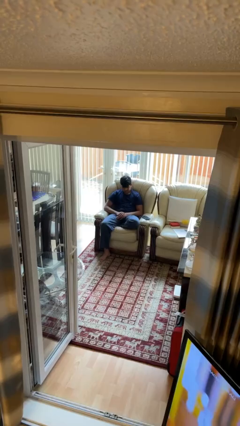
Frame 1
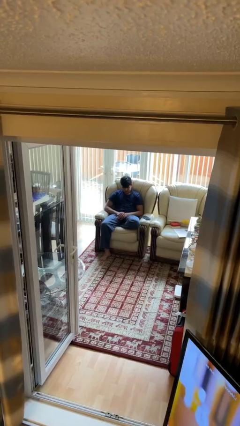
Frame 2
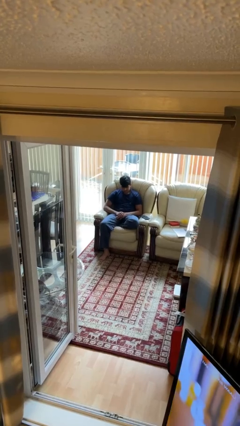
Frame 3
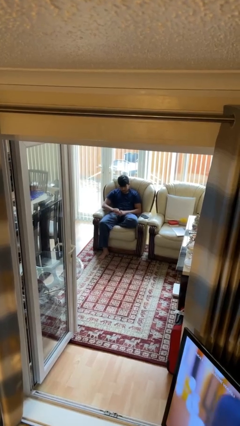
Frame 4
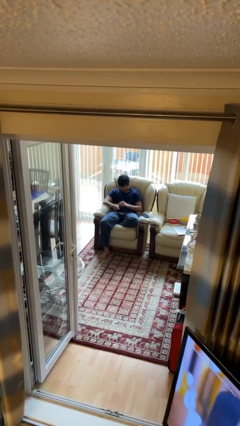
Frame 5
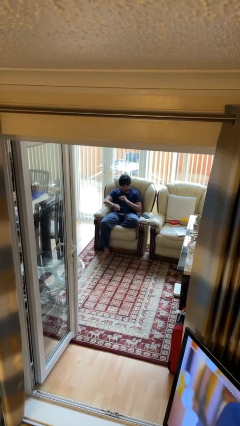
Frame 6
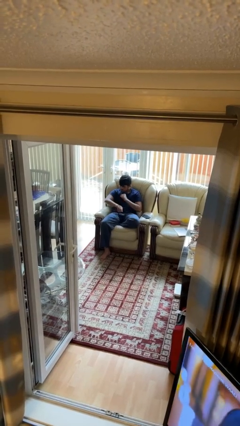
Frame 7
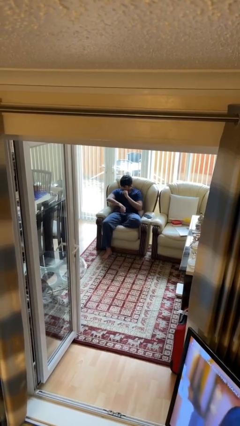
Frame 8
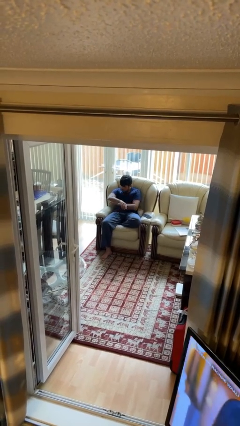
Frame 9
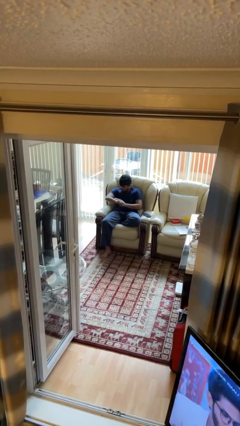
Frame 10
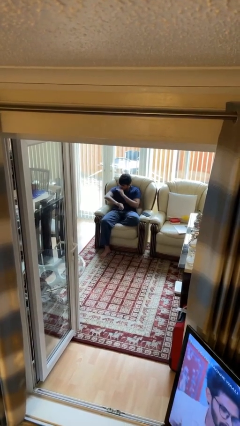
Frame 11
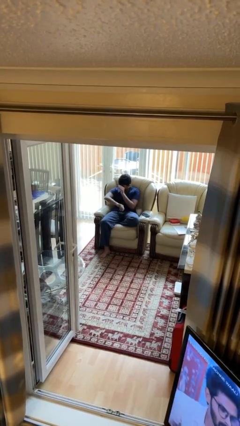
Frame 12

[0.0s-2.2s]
person swats bug

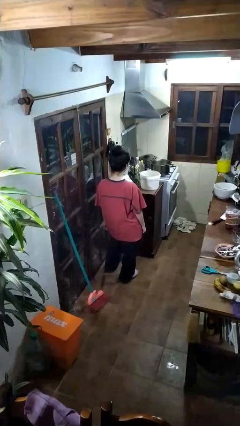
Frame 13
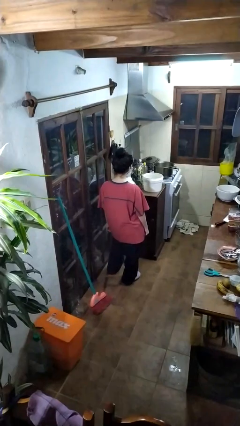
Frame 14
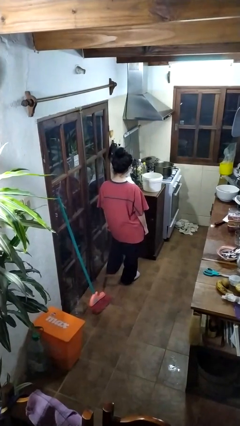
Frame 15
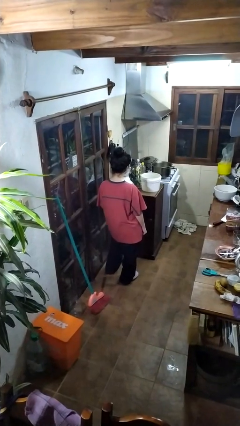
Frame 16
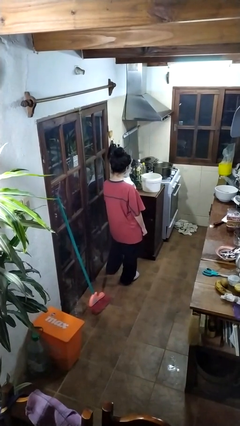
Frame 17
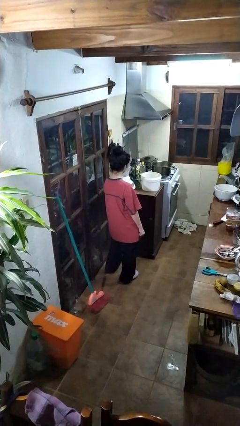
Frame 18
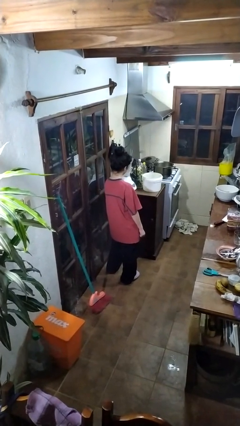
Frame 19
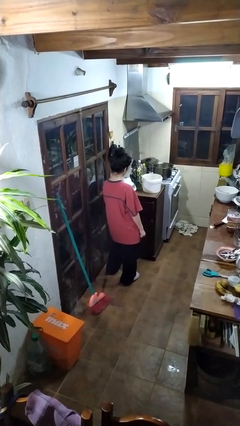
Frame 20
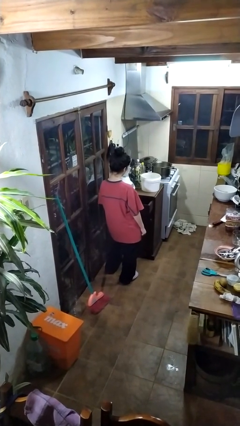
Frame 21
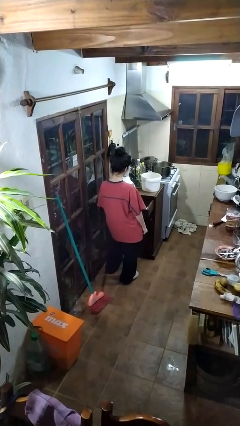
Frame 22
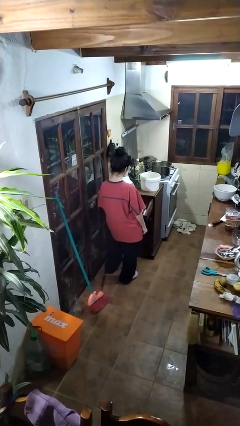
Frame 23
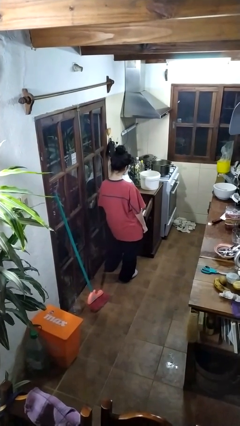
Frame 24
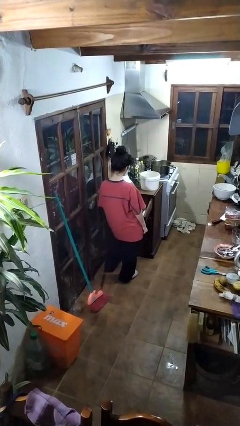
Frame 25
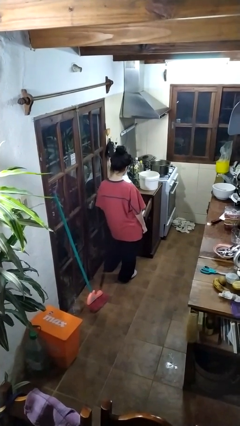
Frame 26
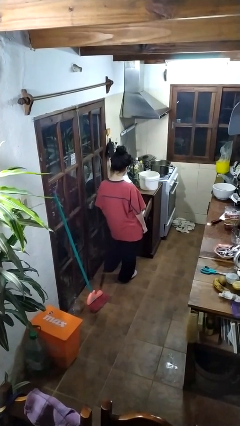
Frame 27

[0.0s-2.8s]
person opens kitchen drawer

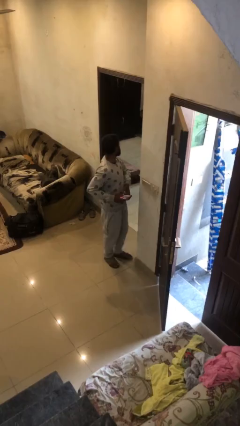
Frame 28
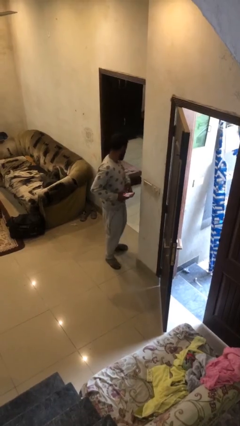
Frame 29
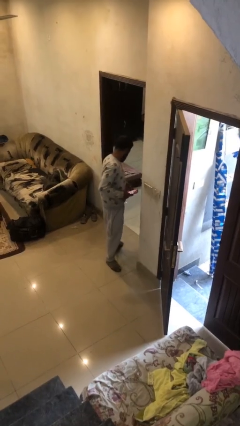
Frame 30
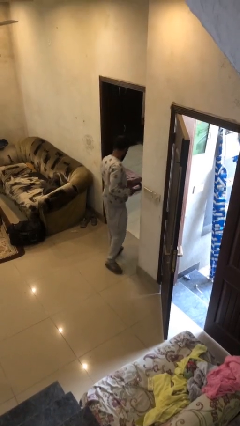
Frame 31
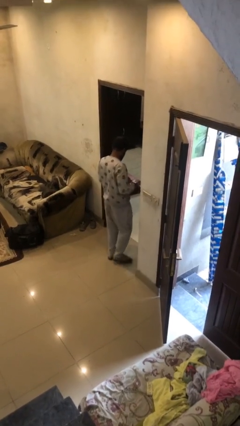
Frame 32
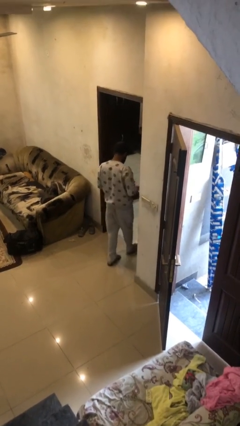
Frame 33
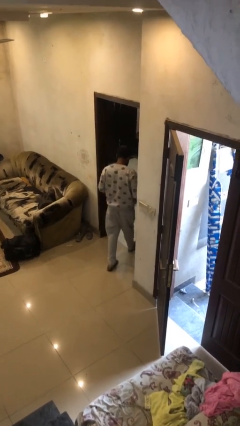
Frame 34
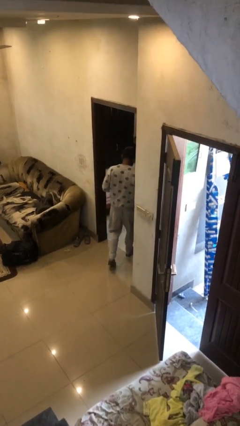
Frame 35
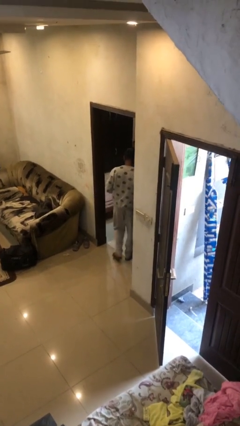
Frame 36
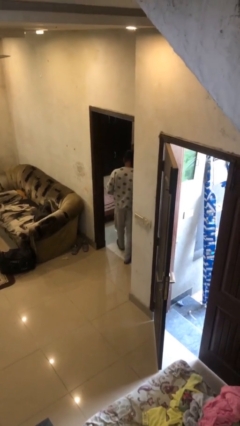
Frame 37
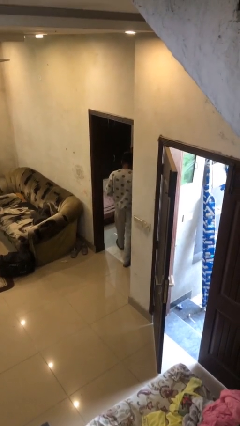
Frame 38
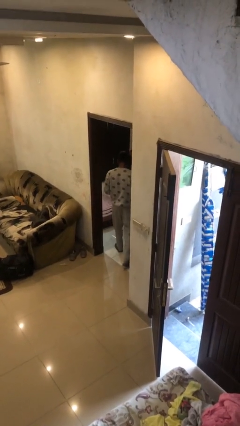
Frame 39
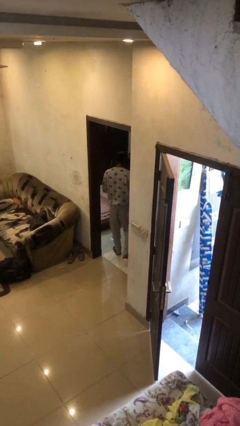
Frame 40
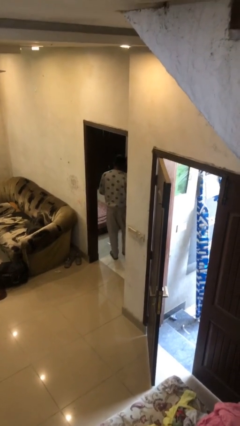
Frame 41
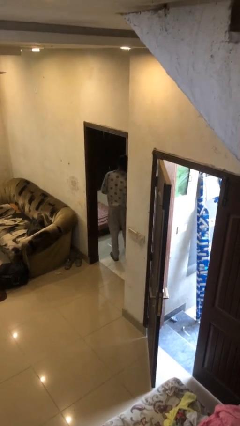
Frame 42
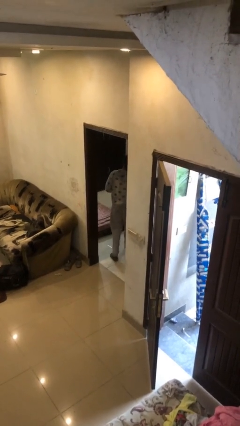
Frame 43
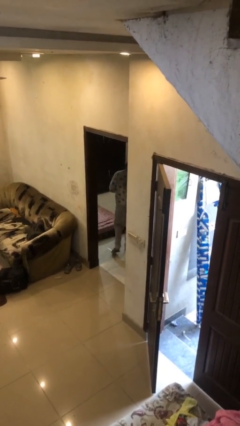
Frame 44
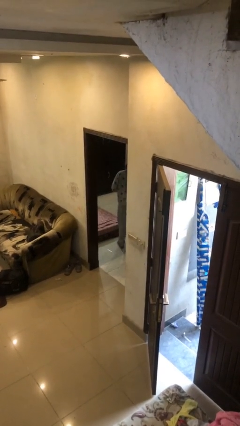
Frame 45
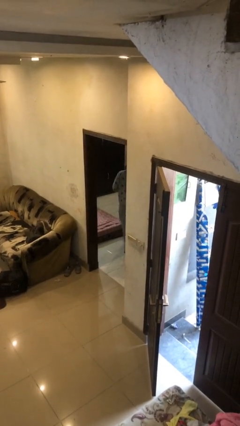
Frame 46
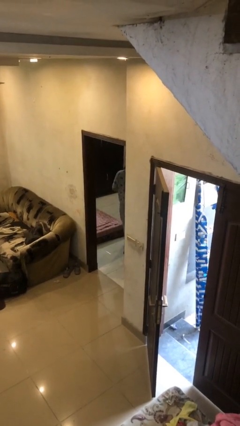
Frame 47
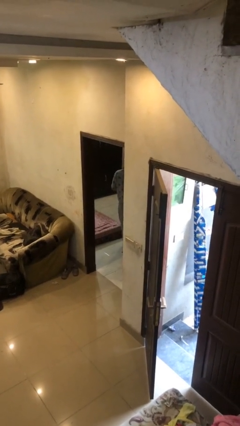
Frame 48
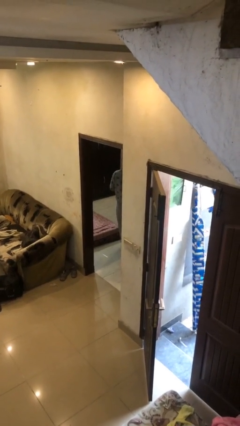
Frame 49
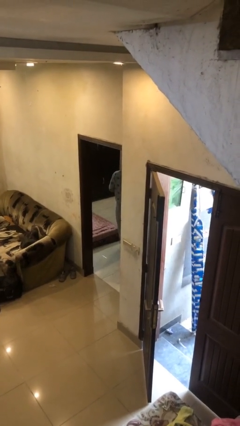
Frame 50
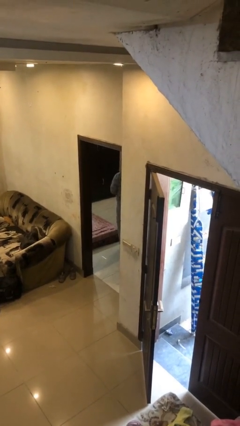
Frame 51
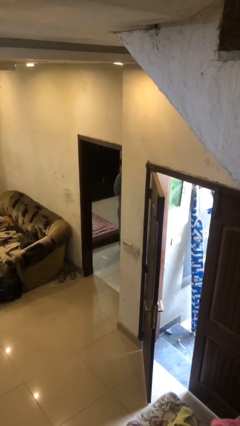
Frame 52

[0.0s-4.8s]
person exits scene through structure

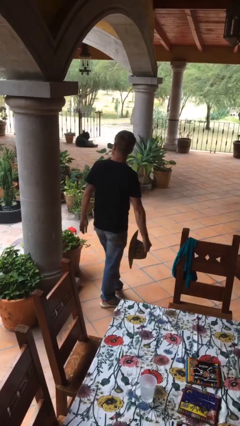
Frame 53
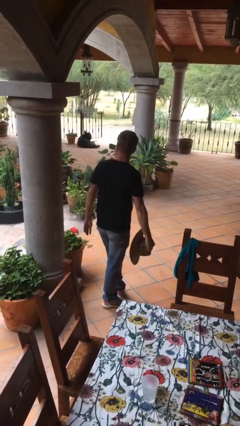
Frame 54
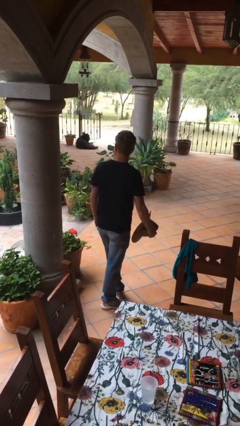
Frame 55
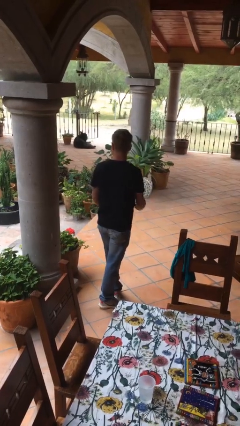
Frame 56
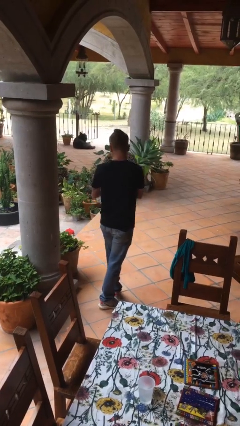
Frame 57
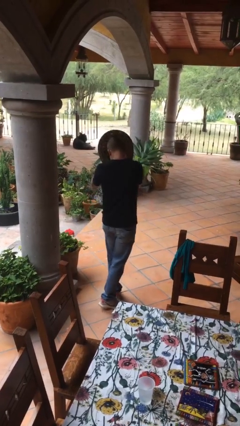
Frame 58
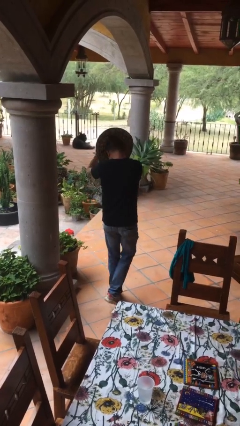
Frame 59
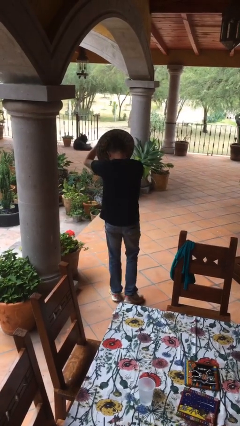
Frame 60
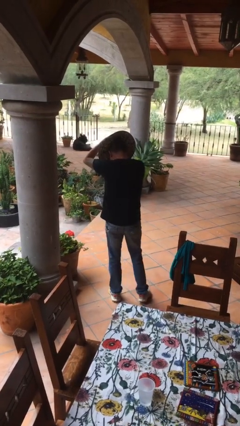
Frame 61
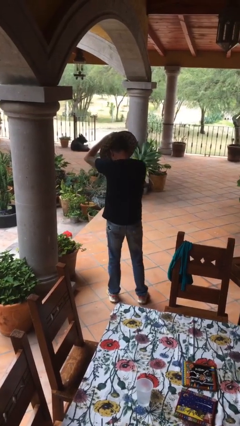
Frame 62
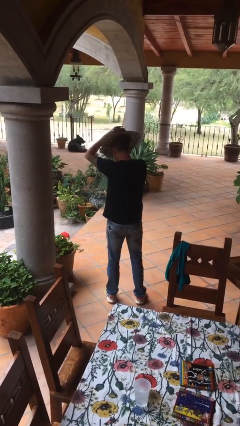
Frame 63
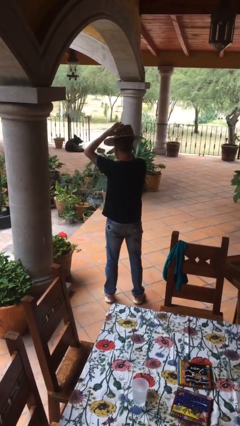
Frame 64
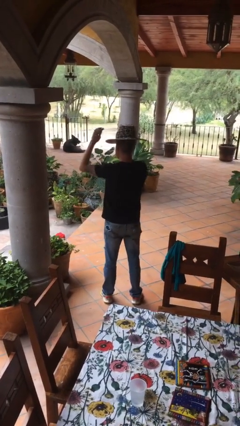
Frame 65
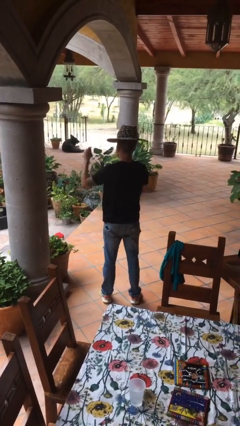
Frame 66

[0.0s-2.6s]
person puts on hat

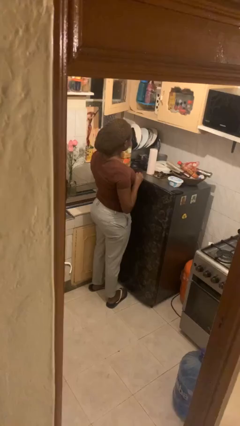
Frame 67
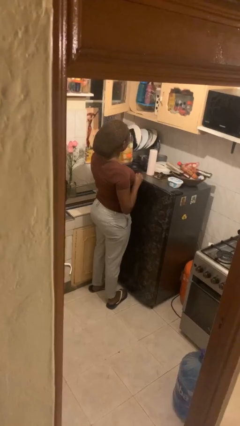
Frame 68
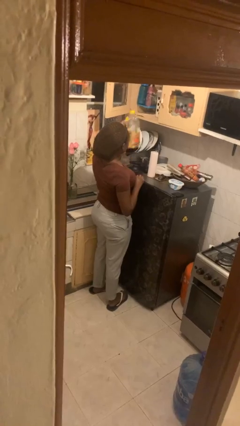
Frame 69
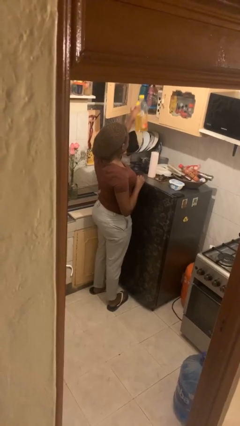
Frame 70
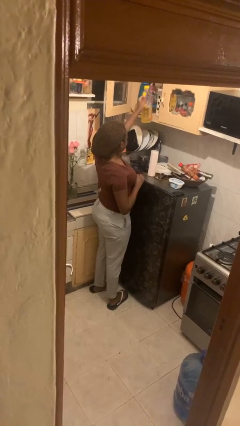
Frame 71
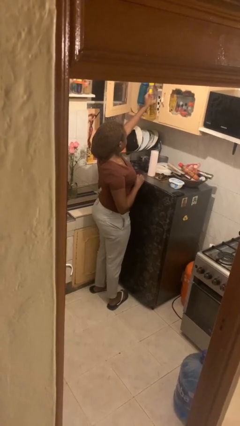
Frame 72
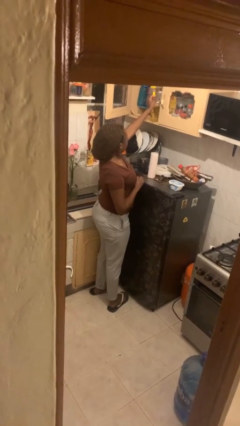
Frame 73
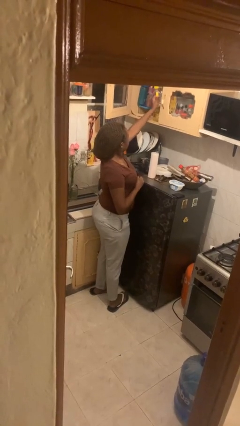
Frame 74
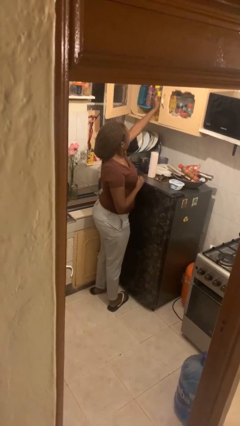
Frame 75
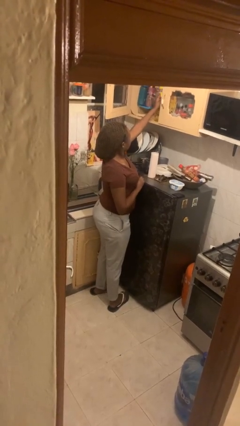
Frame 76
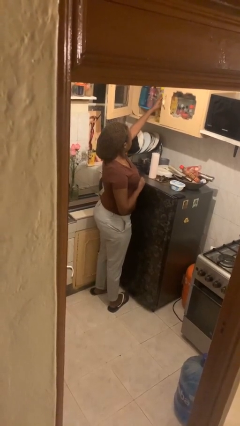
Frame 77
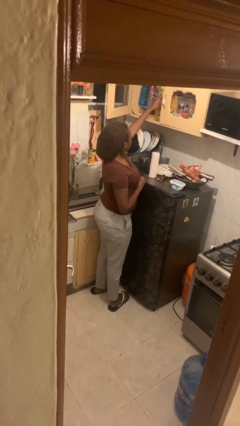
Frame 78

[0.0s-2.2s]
person puts down object into cabinet

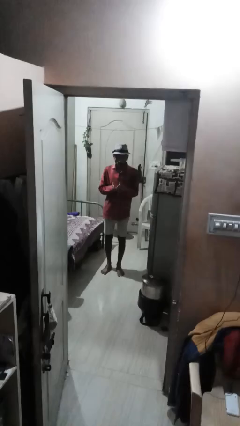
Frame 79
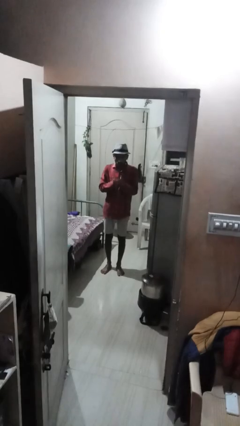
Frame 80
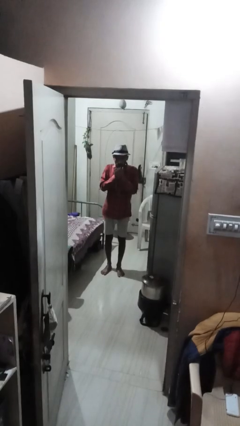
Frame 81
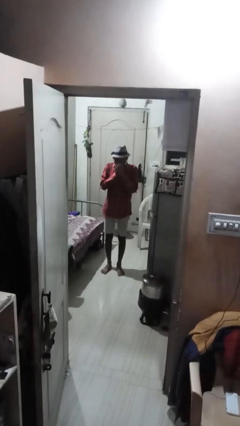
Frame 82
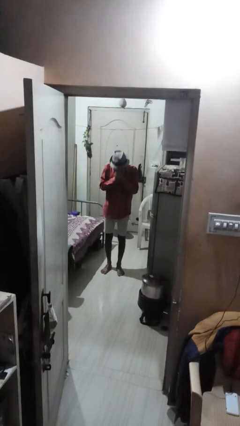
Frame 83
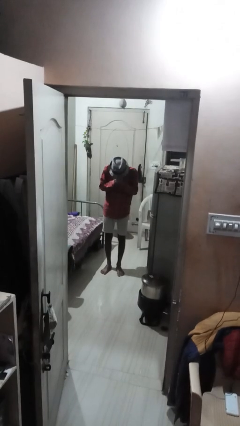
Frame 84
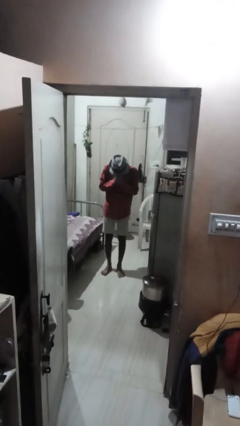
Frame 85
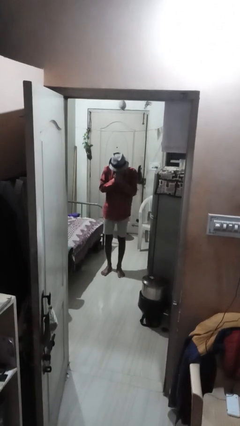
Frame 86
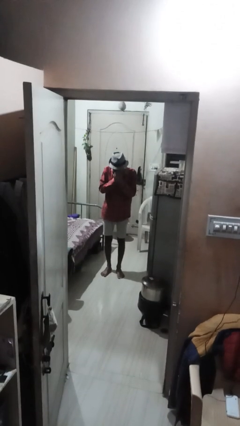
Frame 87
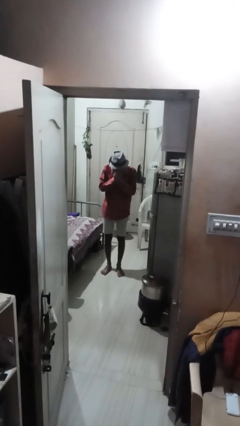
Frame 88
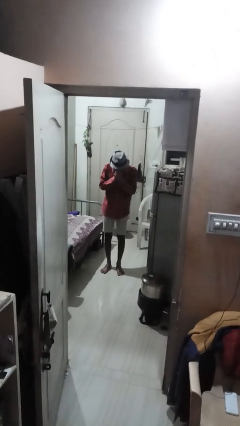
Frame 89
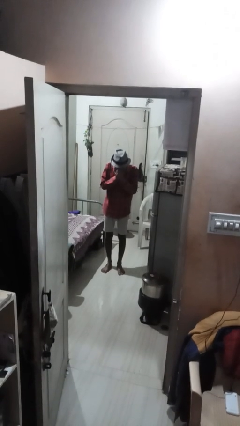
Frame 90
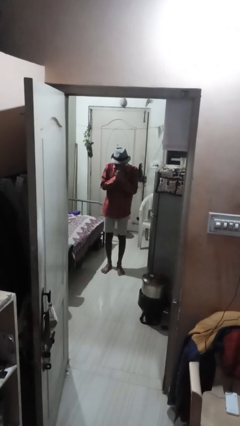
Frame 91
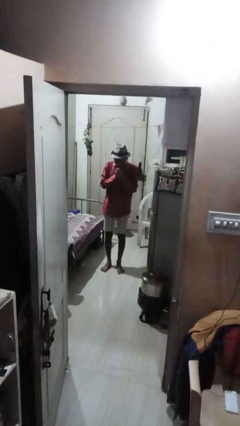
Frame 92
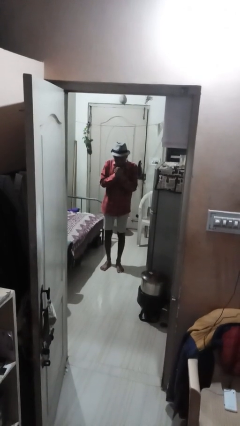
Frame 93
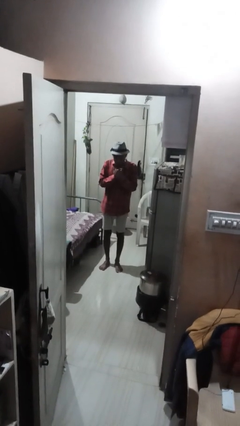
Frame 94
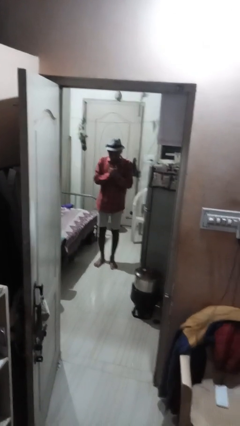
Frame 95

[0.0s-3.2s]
person sneezes into hand
